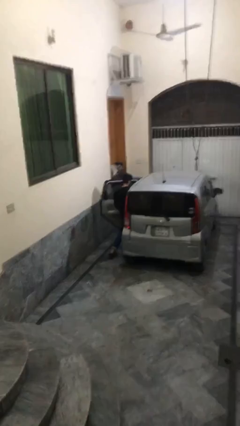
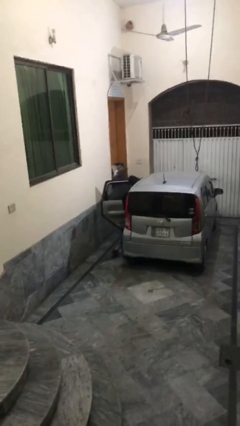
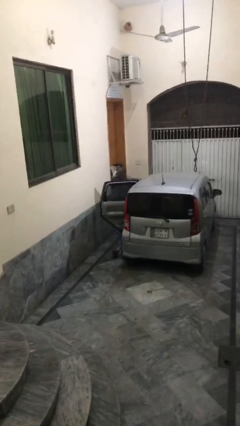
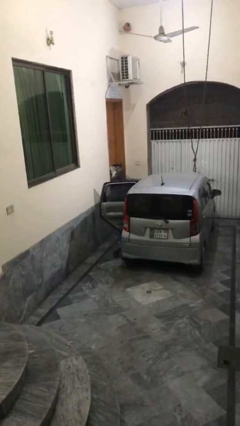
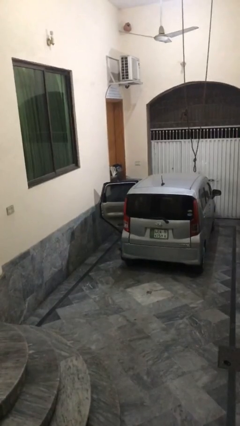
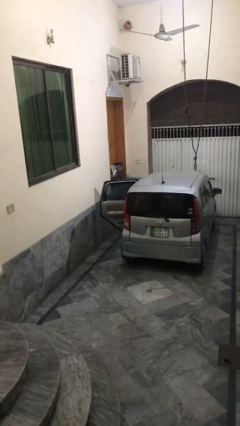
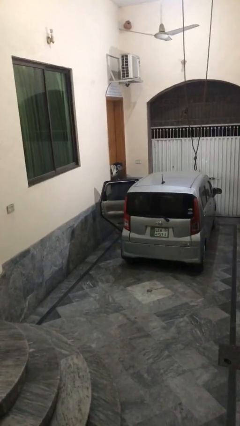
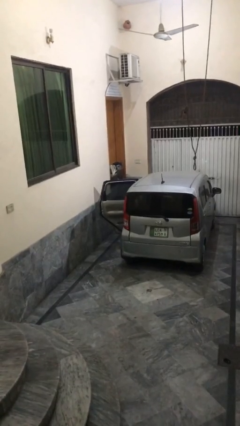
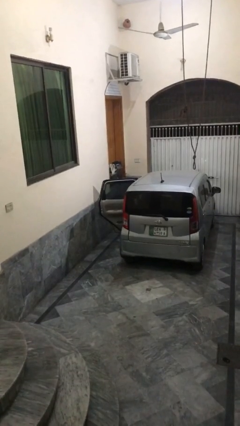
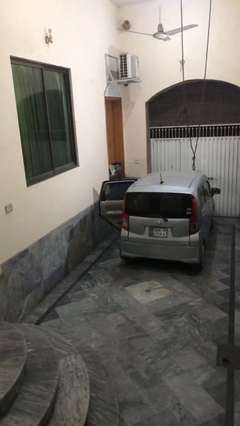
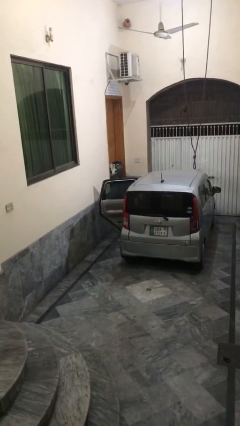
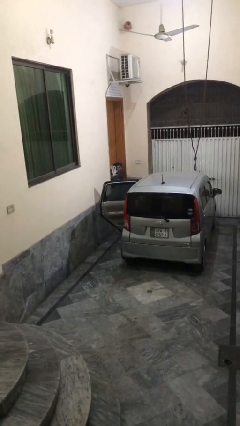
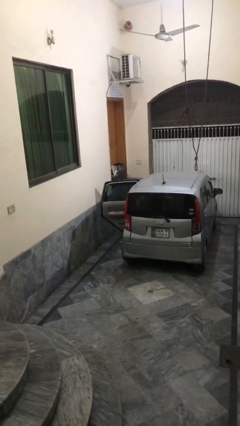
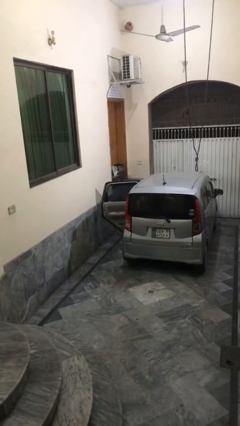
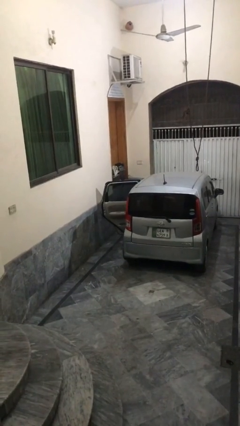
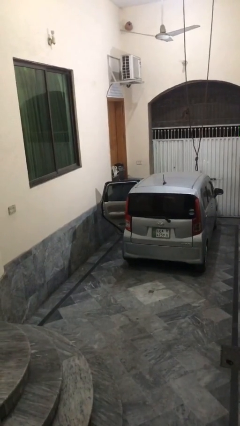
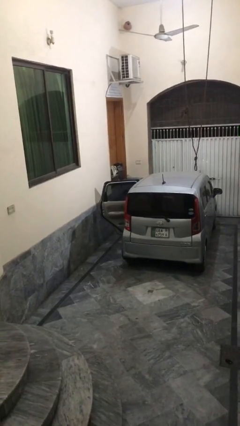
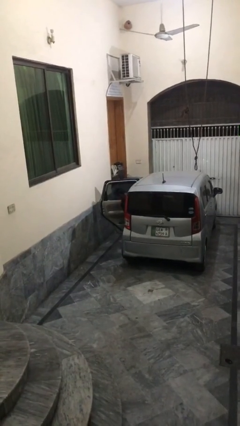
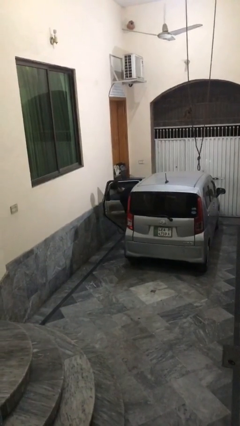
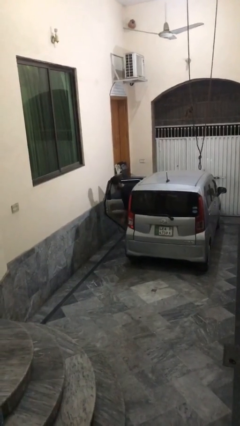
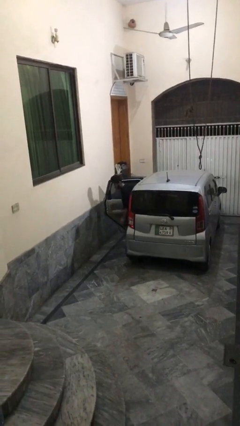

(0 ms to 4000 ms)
person enters car

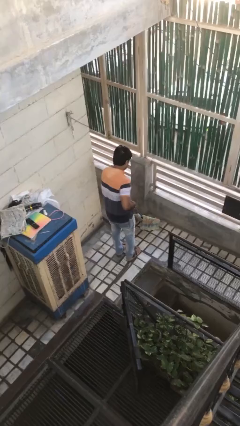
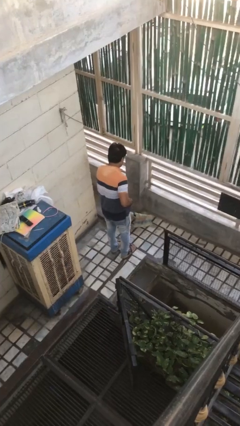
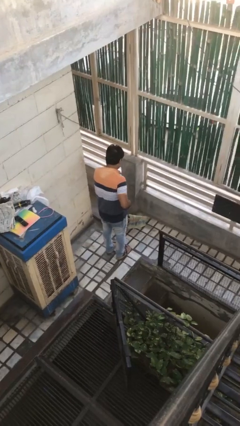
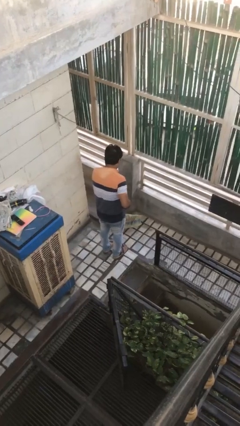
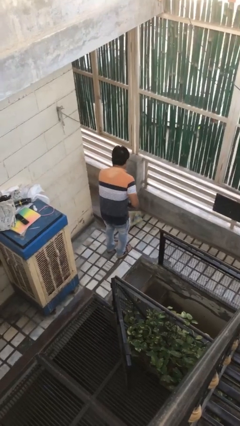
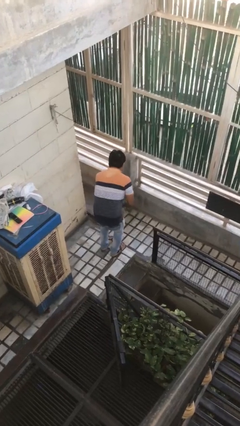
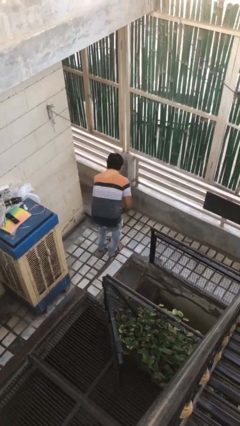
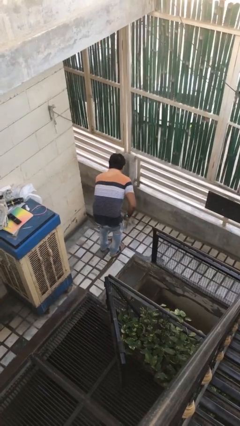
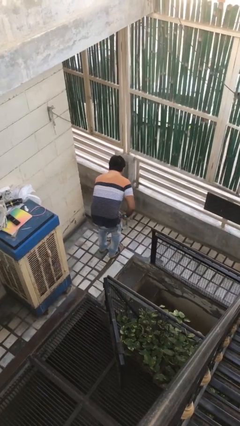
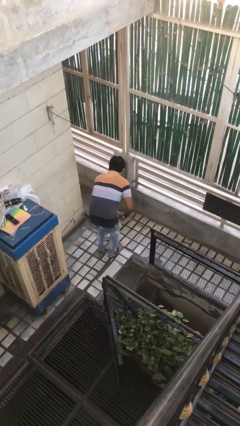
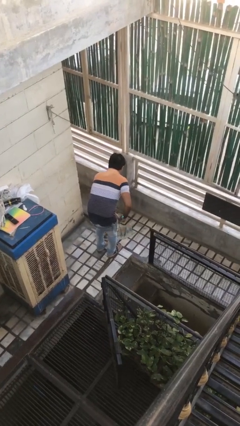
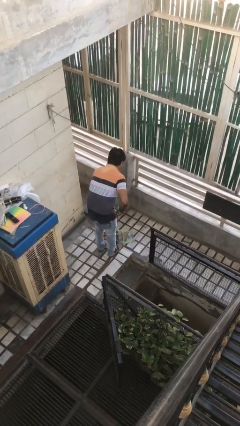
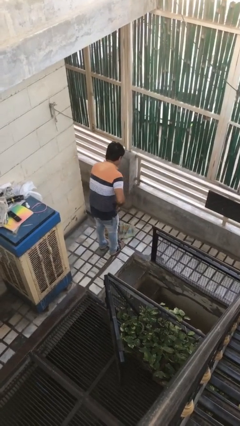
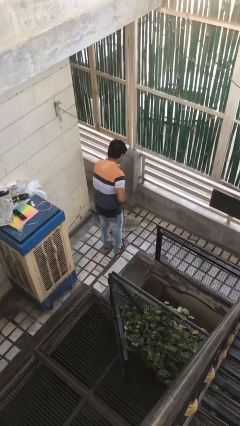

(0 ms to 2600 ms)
person mops

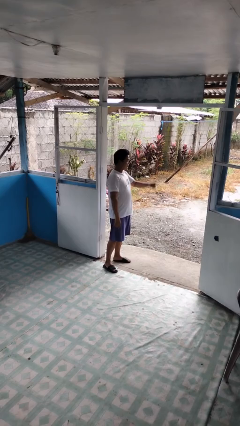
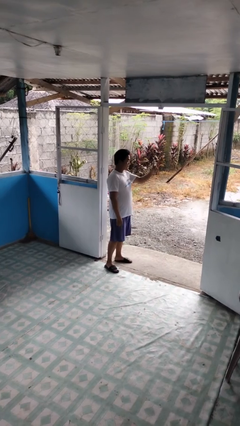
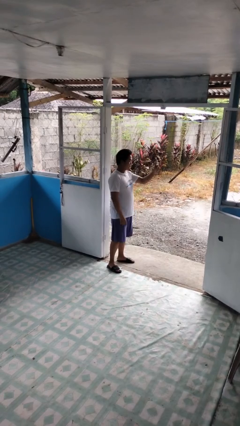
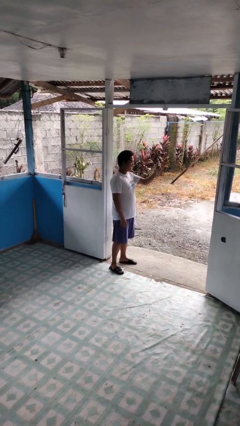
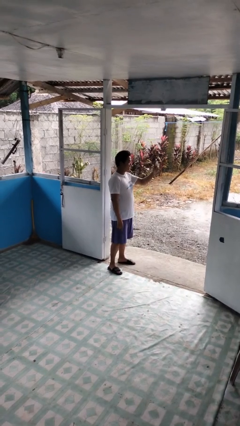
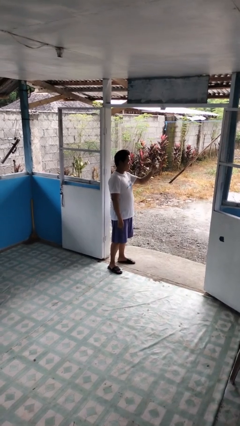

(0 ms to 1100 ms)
person gestures number one

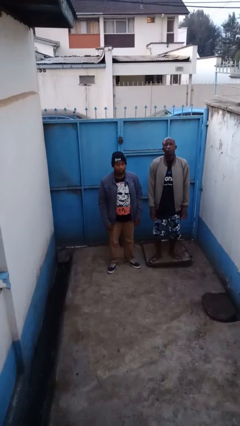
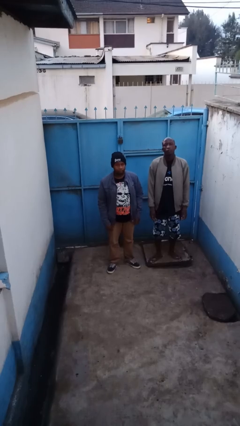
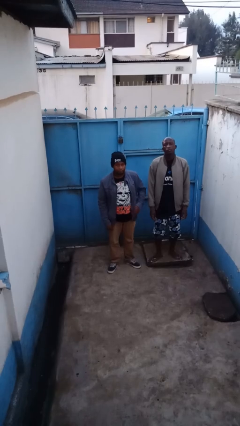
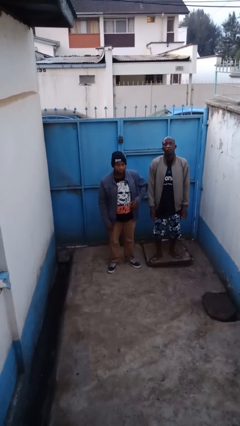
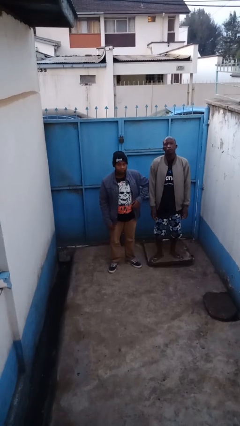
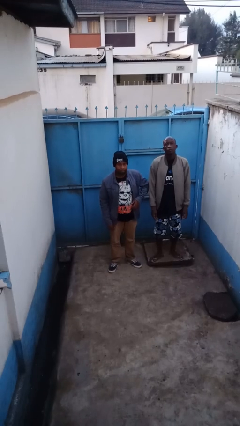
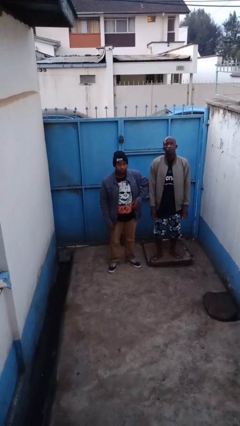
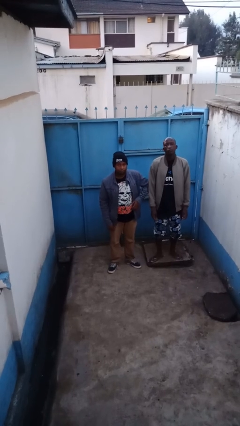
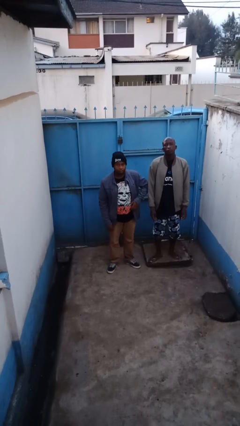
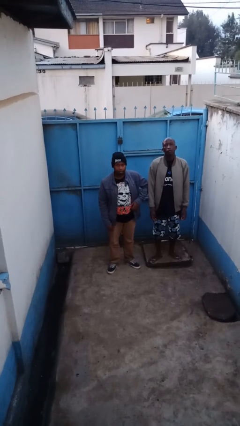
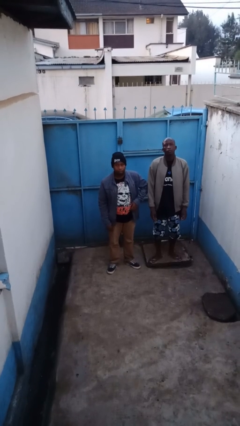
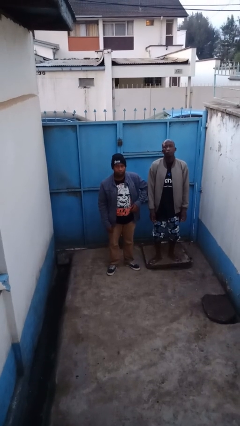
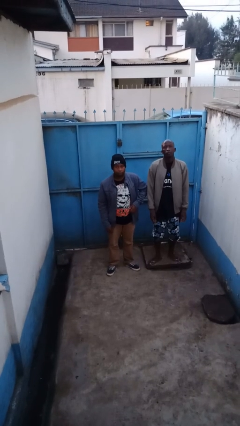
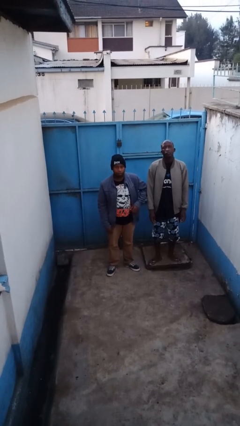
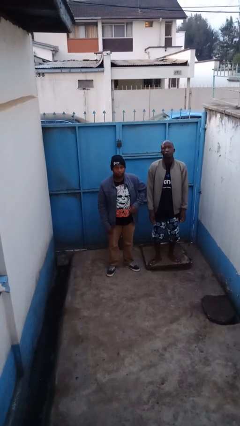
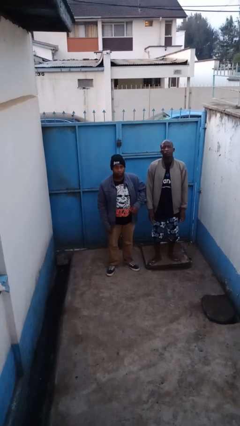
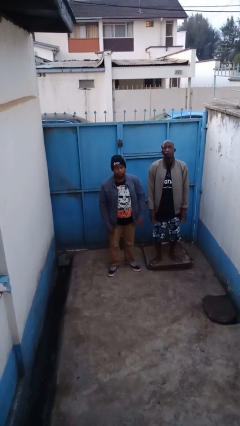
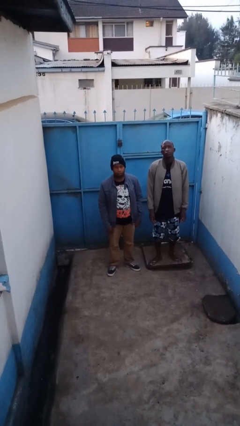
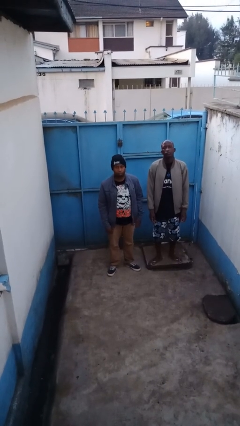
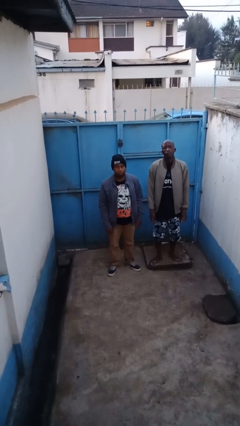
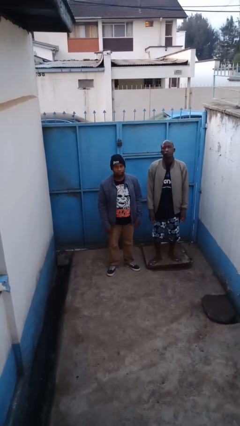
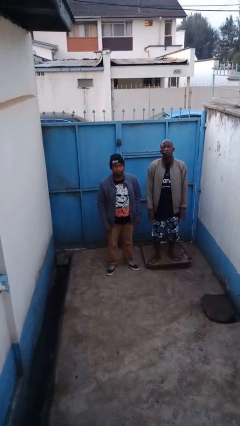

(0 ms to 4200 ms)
person nudges person with elbow

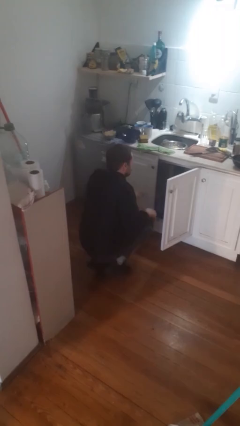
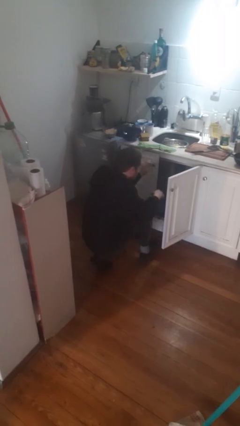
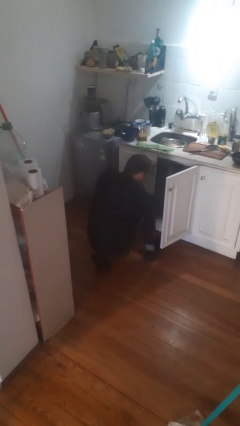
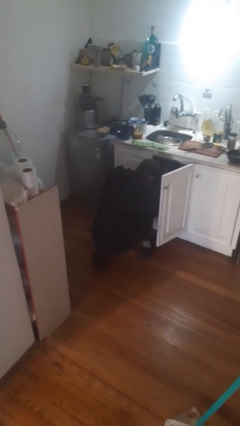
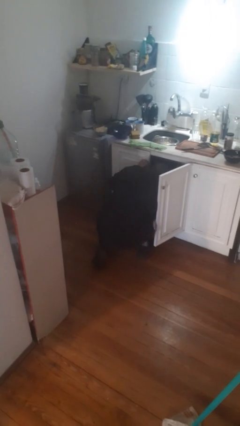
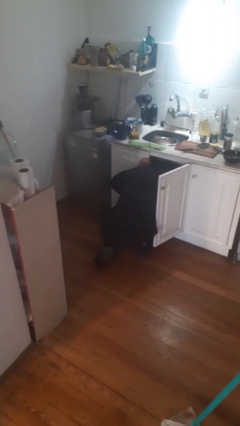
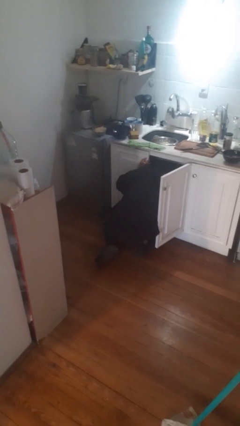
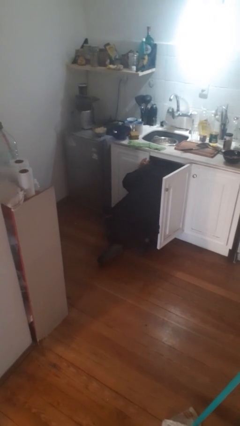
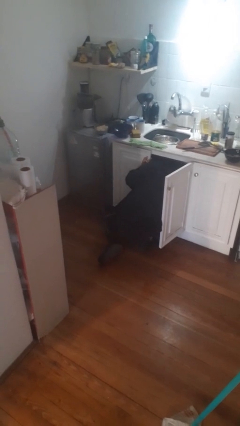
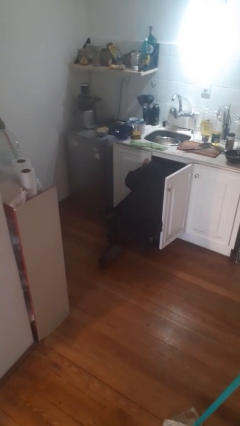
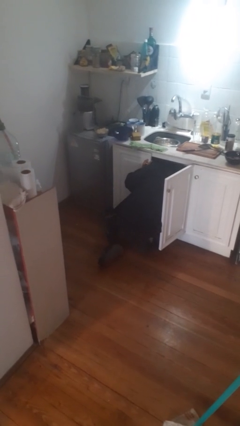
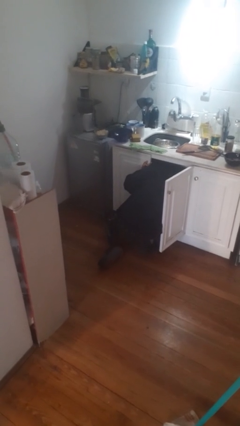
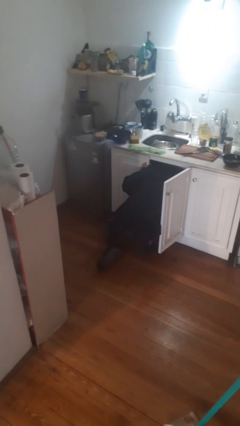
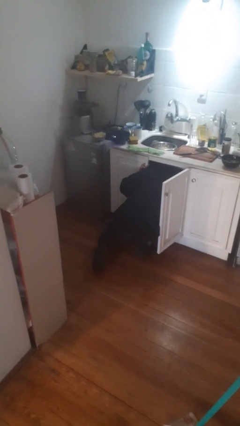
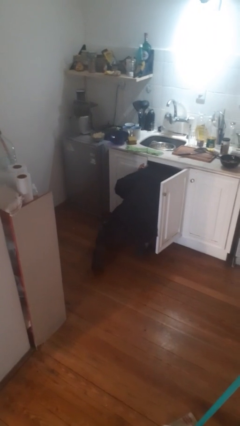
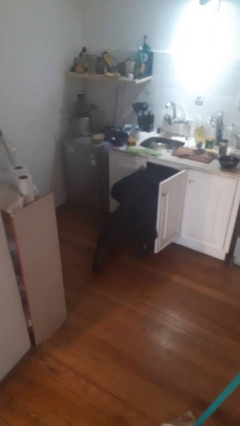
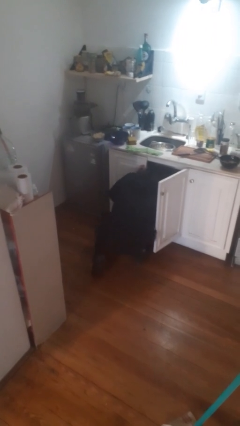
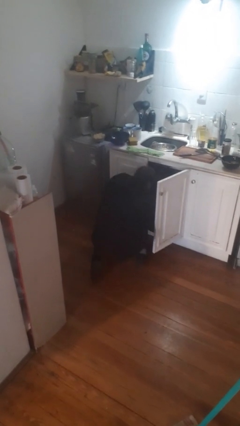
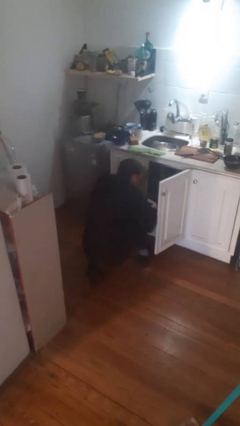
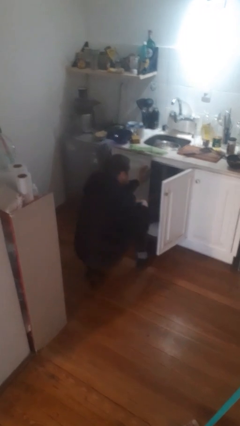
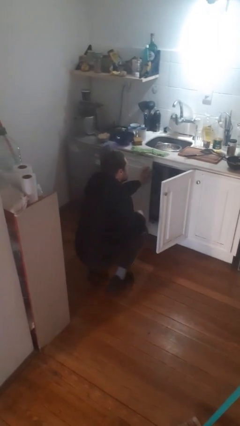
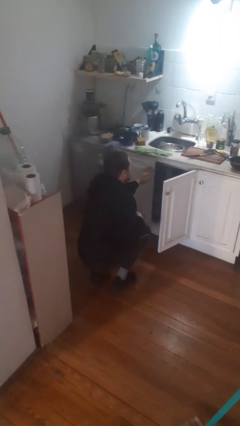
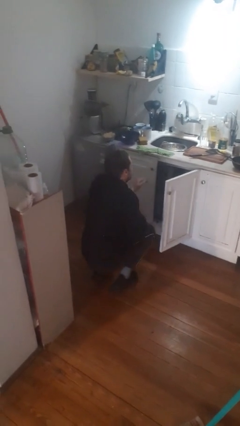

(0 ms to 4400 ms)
person searches in cabinet

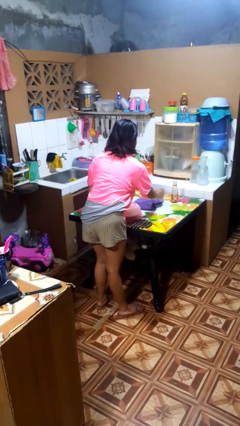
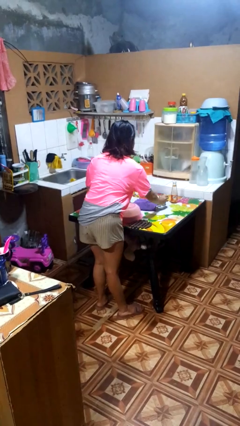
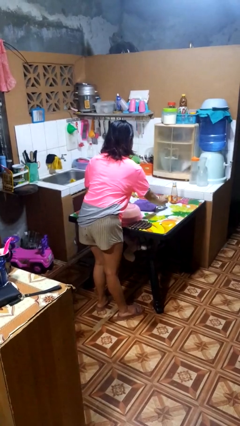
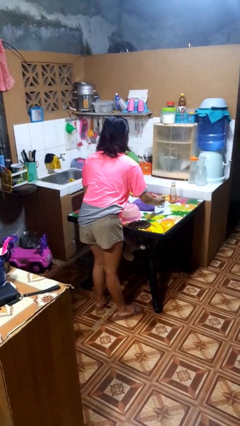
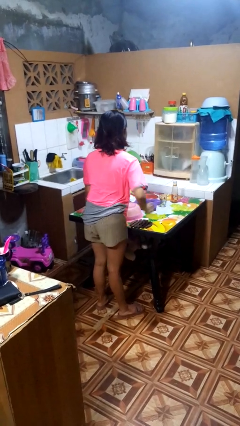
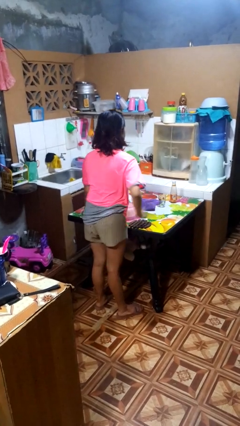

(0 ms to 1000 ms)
person sets upright glass
